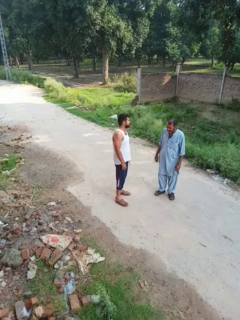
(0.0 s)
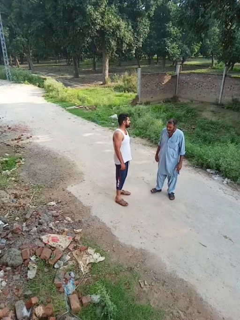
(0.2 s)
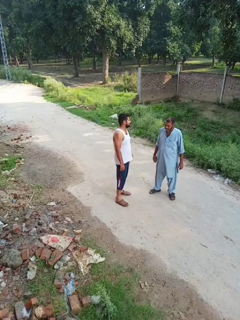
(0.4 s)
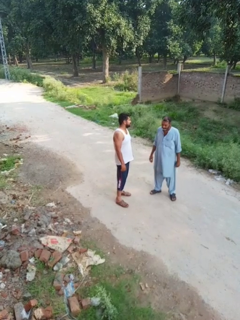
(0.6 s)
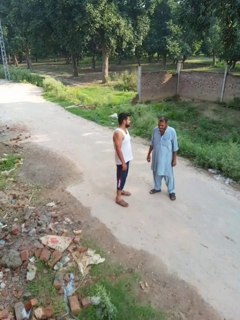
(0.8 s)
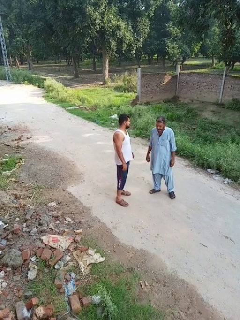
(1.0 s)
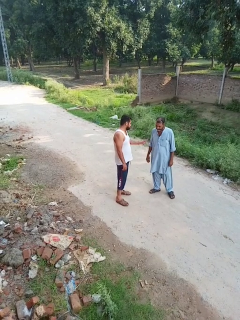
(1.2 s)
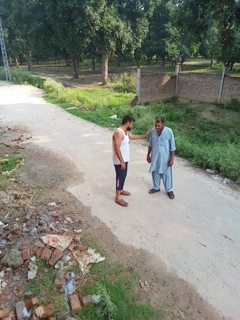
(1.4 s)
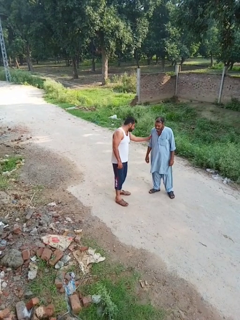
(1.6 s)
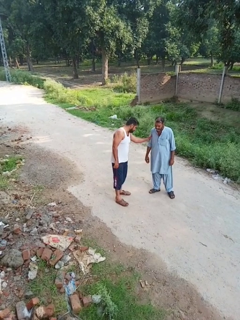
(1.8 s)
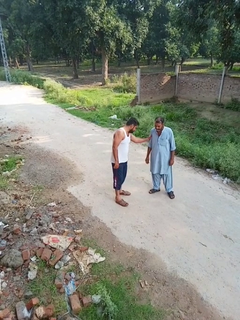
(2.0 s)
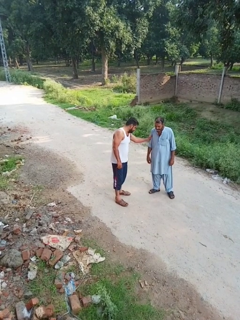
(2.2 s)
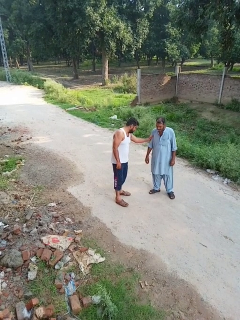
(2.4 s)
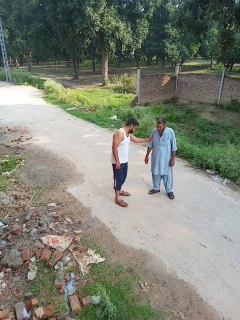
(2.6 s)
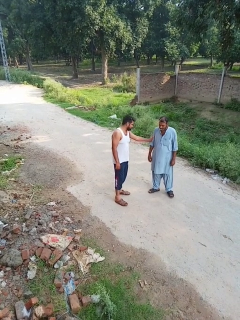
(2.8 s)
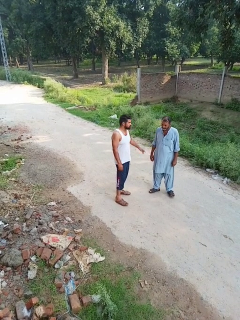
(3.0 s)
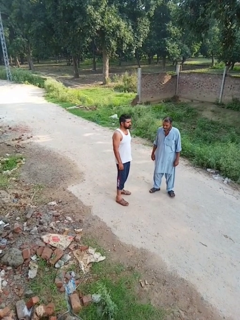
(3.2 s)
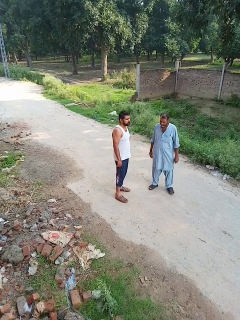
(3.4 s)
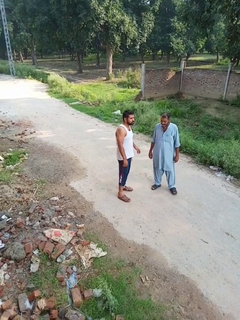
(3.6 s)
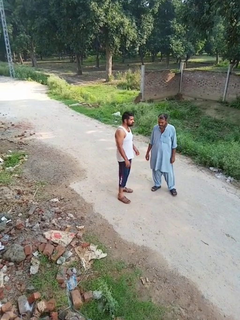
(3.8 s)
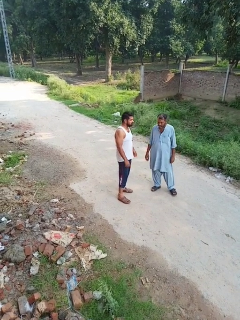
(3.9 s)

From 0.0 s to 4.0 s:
person grabs person by forearm

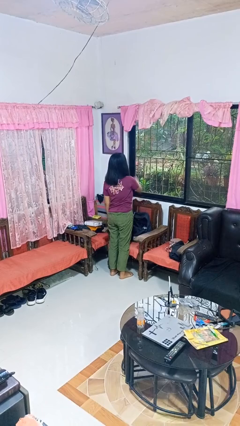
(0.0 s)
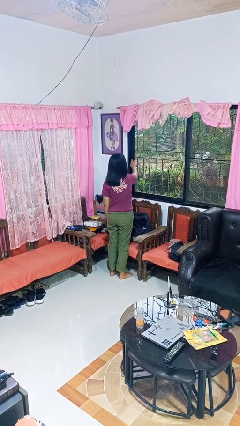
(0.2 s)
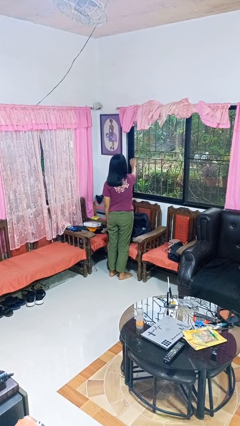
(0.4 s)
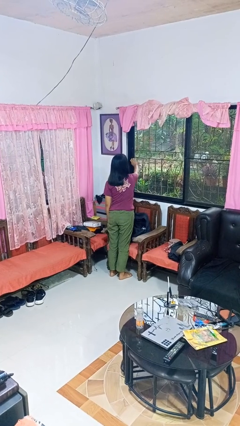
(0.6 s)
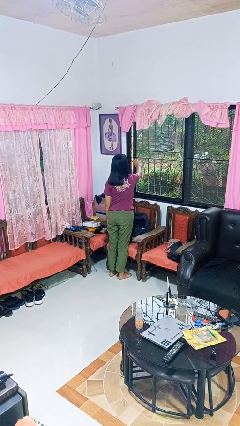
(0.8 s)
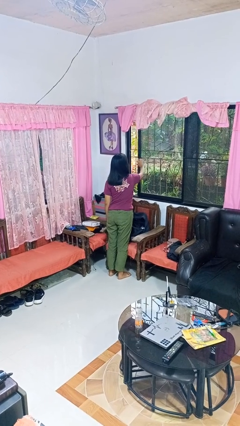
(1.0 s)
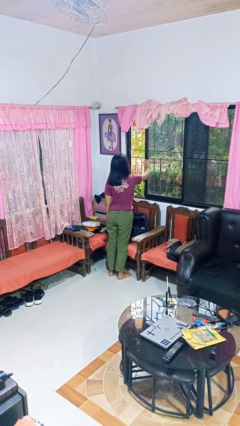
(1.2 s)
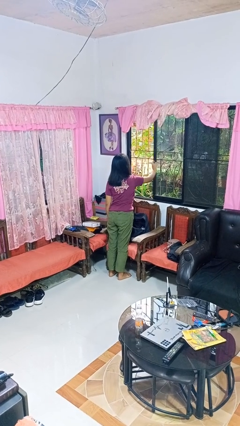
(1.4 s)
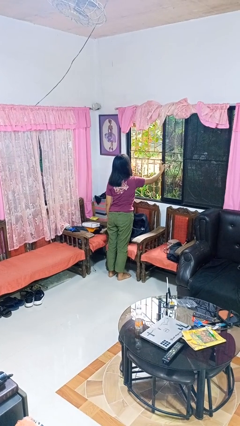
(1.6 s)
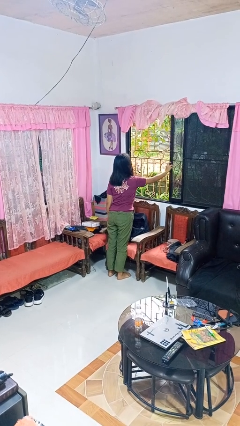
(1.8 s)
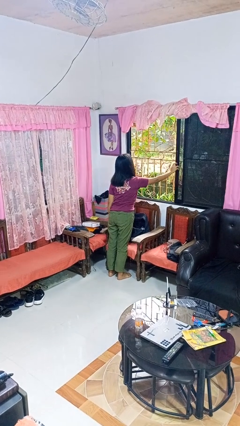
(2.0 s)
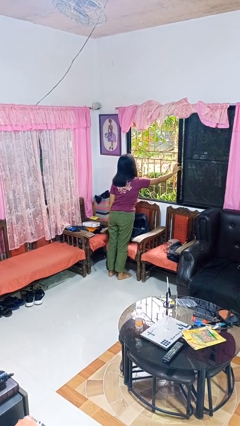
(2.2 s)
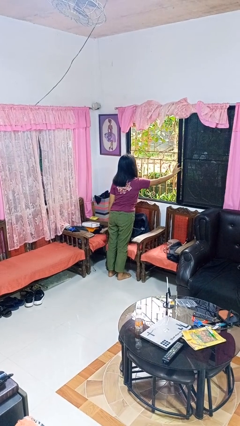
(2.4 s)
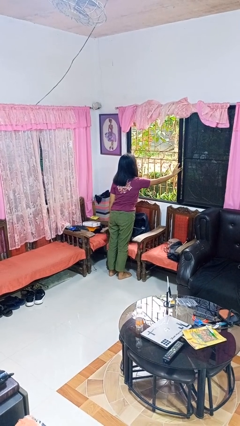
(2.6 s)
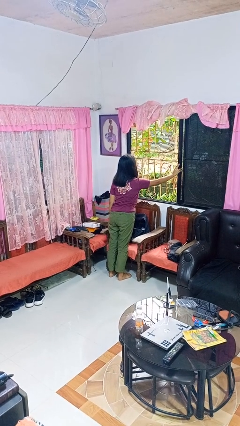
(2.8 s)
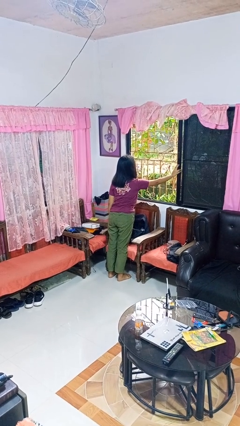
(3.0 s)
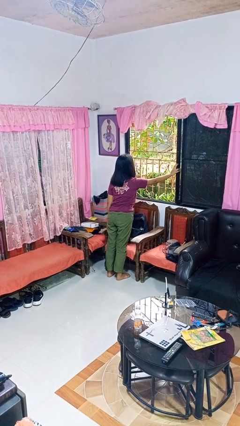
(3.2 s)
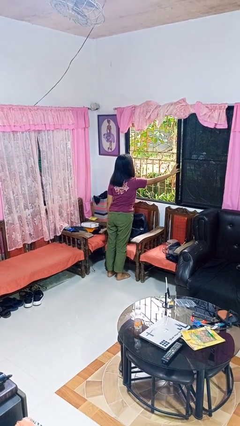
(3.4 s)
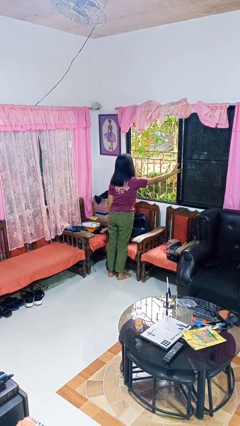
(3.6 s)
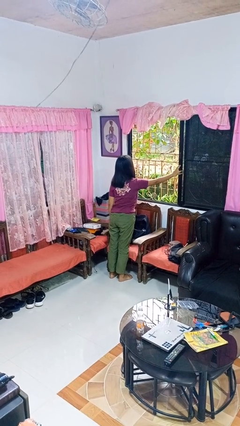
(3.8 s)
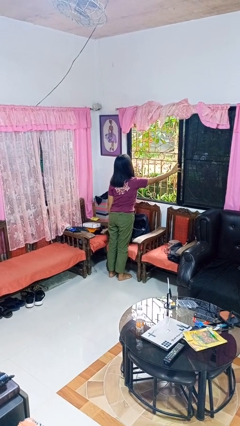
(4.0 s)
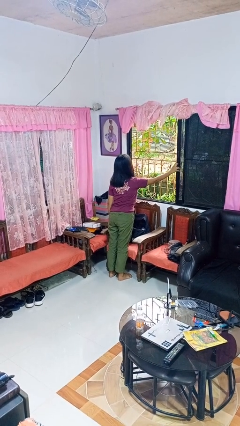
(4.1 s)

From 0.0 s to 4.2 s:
person opens home window

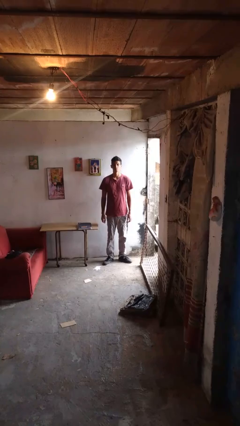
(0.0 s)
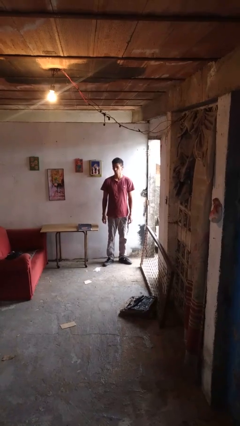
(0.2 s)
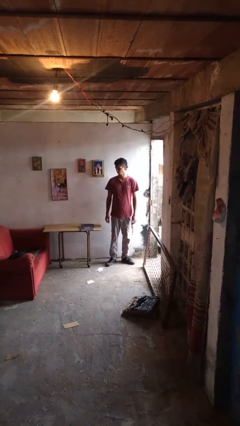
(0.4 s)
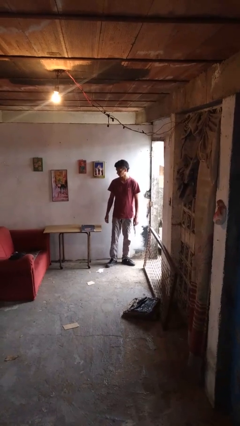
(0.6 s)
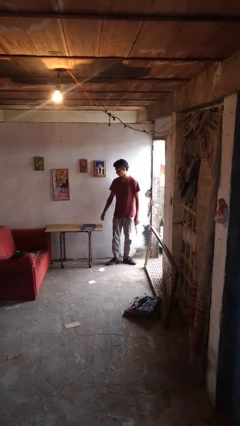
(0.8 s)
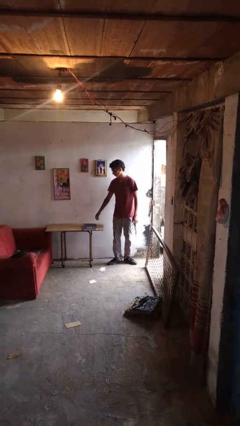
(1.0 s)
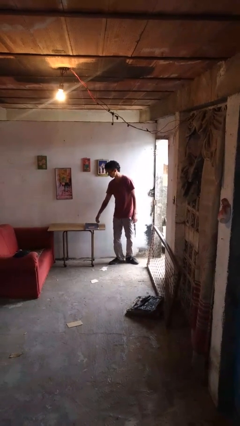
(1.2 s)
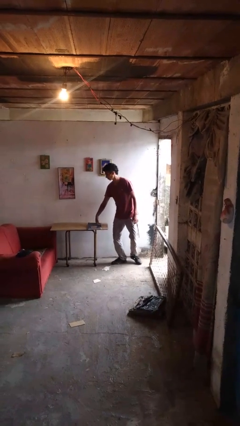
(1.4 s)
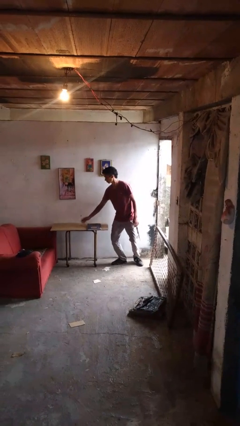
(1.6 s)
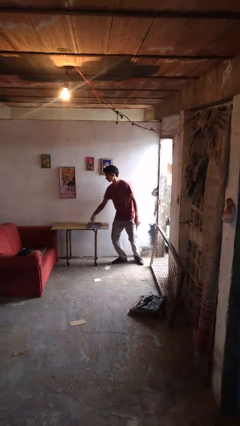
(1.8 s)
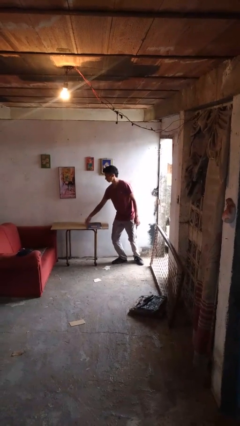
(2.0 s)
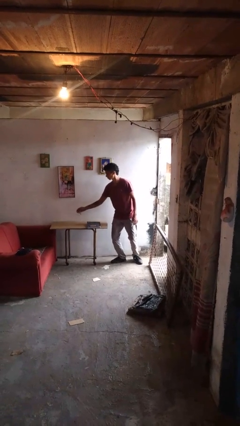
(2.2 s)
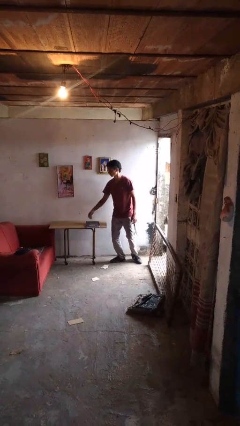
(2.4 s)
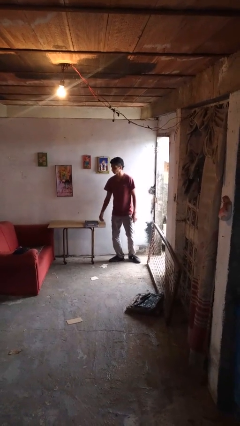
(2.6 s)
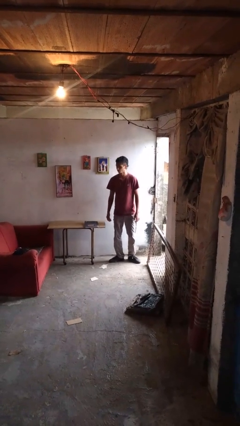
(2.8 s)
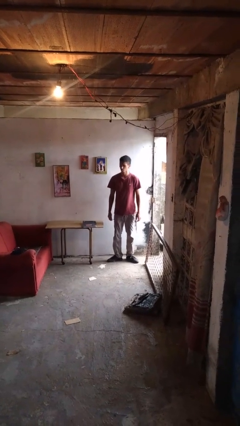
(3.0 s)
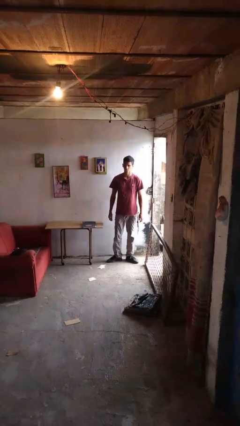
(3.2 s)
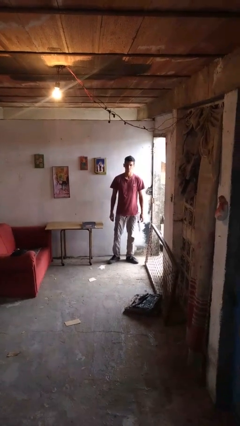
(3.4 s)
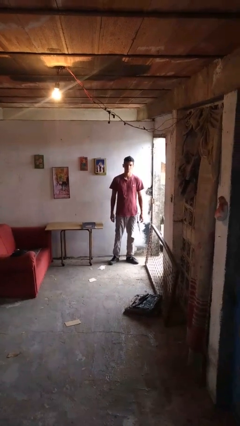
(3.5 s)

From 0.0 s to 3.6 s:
person picks up object from floor

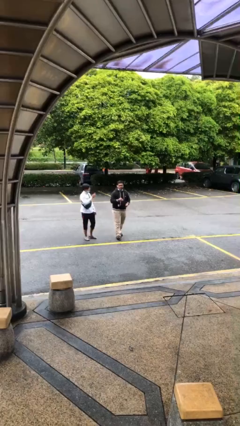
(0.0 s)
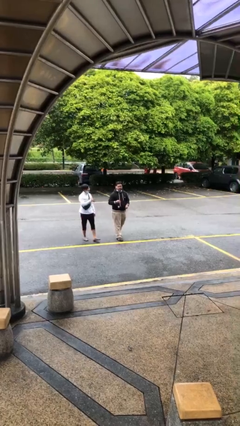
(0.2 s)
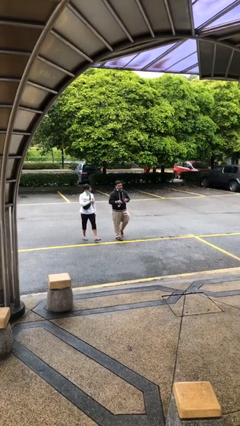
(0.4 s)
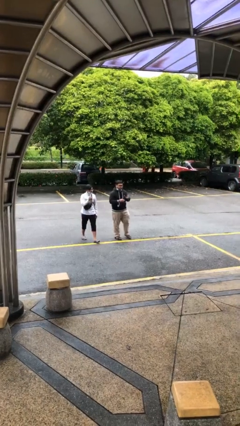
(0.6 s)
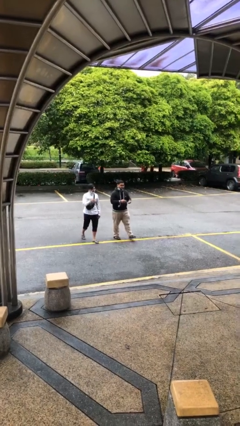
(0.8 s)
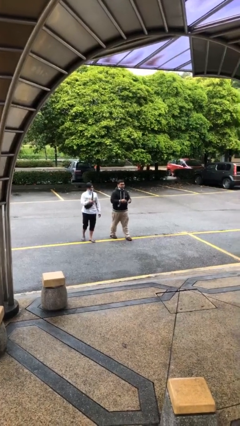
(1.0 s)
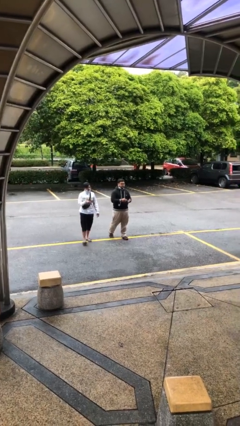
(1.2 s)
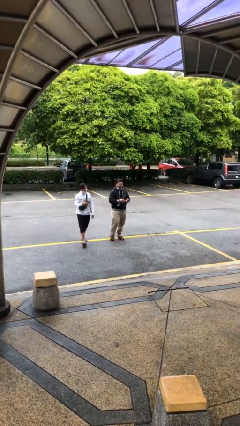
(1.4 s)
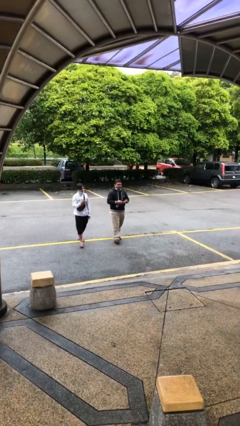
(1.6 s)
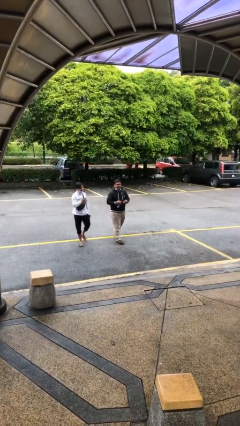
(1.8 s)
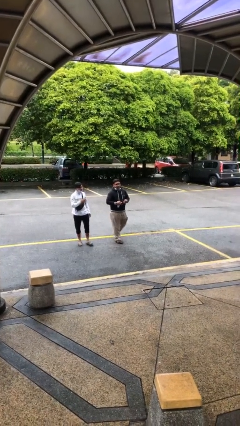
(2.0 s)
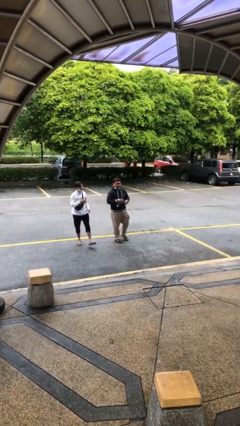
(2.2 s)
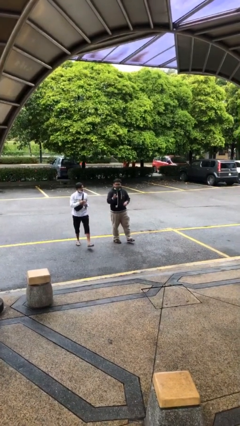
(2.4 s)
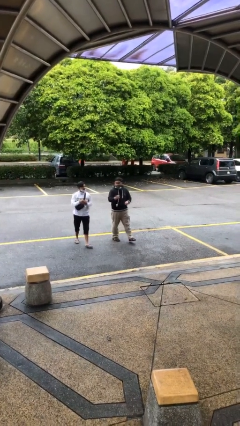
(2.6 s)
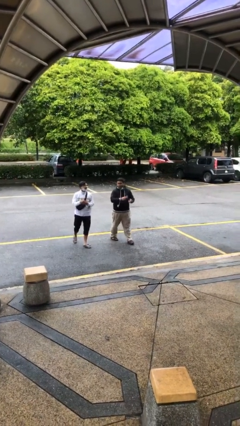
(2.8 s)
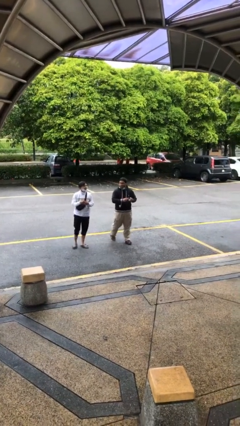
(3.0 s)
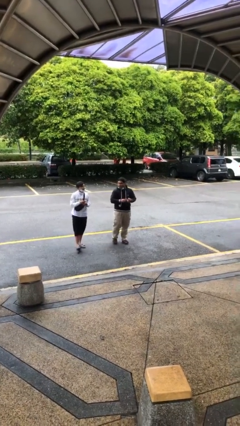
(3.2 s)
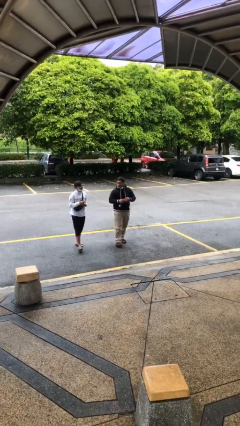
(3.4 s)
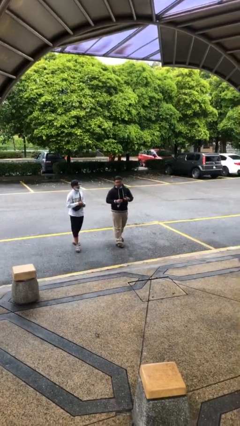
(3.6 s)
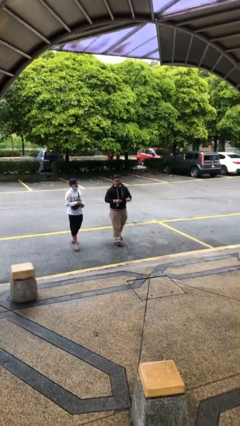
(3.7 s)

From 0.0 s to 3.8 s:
person talks to person

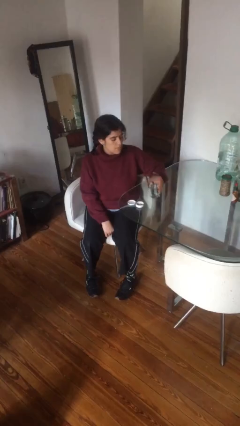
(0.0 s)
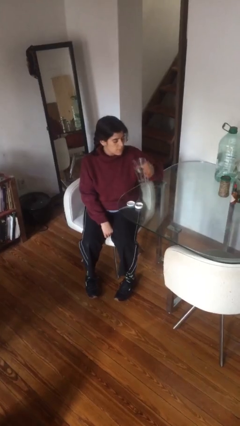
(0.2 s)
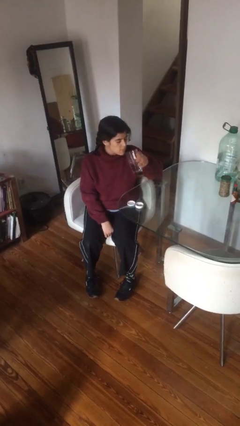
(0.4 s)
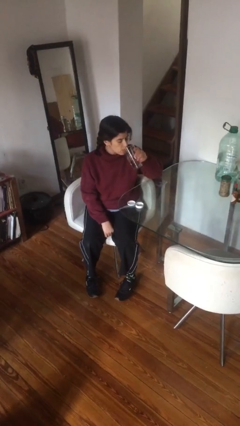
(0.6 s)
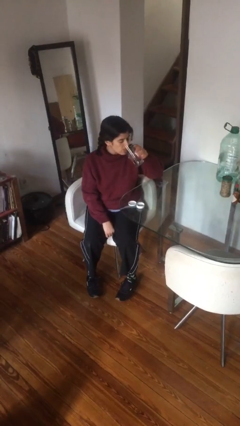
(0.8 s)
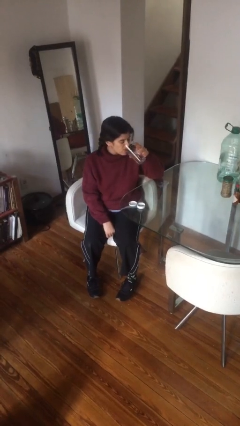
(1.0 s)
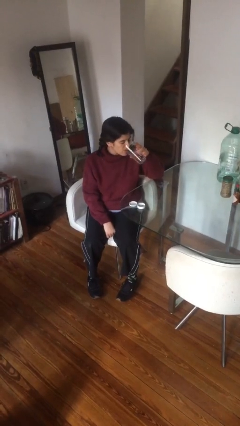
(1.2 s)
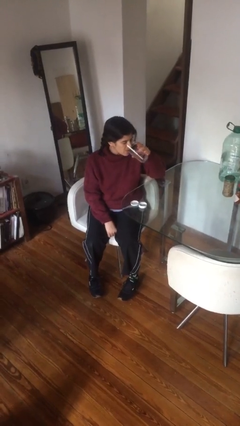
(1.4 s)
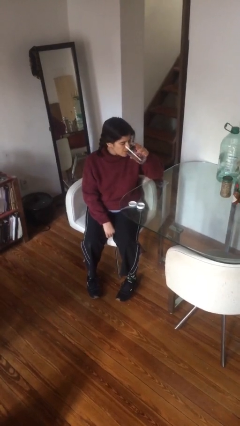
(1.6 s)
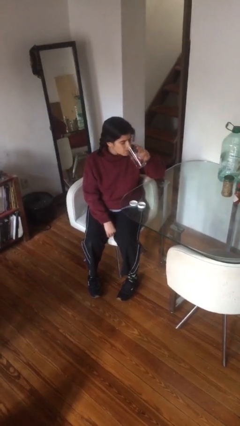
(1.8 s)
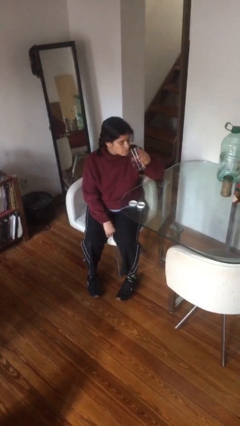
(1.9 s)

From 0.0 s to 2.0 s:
person drinks from cup

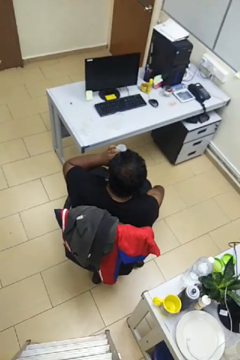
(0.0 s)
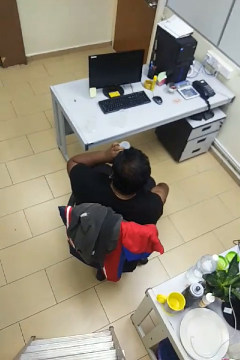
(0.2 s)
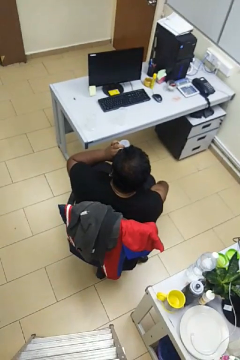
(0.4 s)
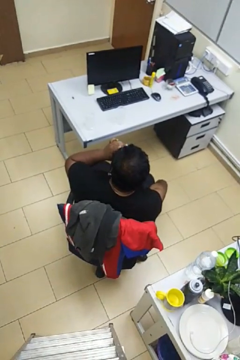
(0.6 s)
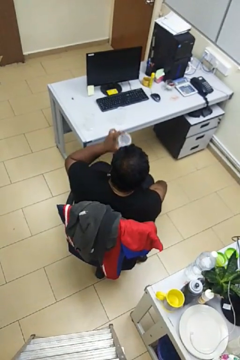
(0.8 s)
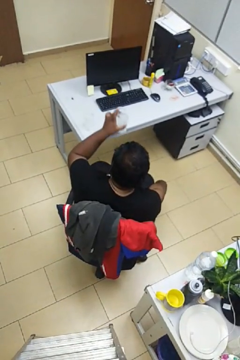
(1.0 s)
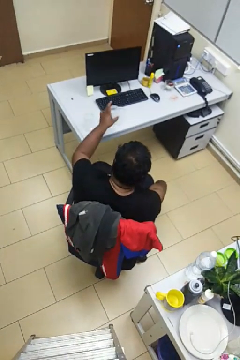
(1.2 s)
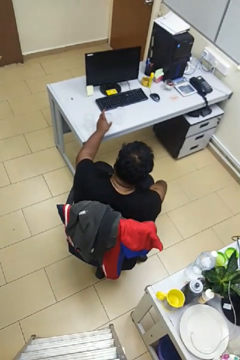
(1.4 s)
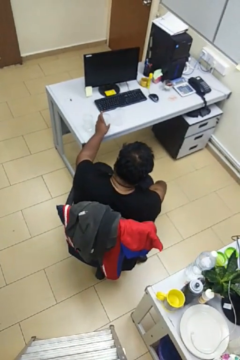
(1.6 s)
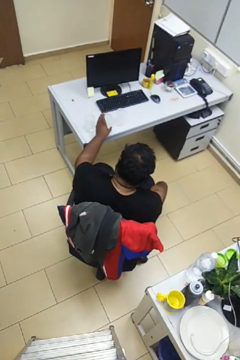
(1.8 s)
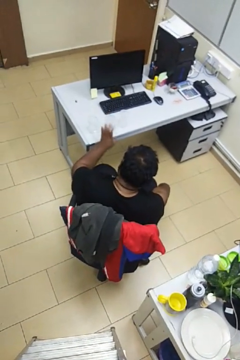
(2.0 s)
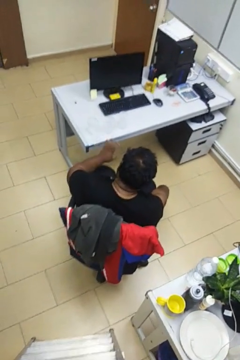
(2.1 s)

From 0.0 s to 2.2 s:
person puts down object on table
